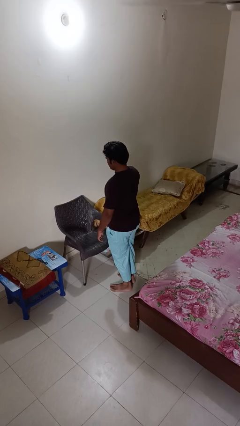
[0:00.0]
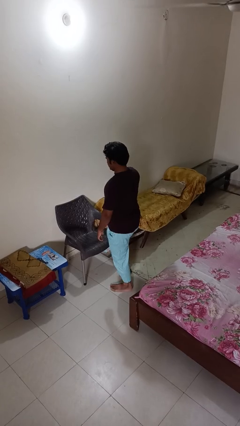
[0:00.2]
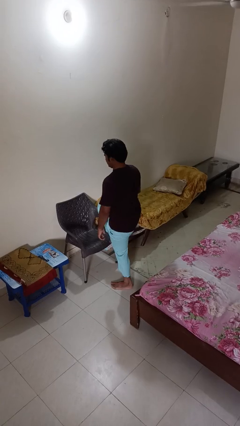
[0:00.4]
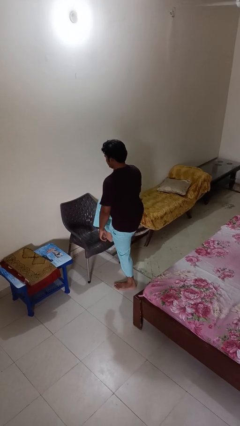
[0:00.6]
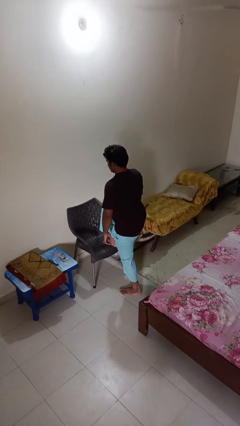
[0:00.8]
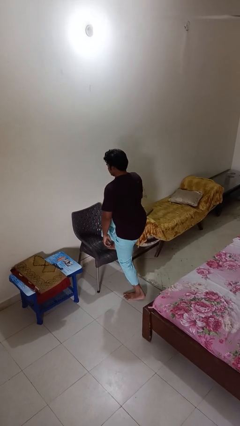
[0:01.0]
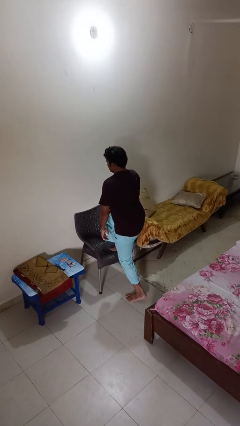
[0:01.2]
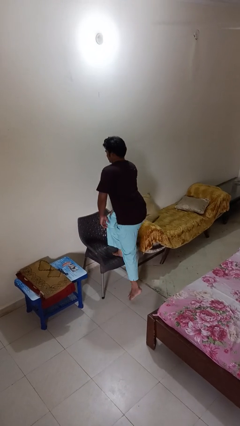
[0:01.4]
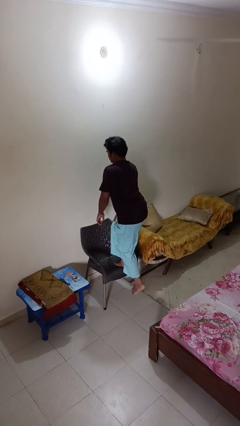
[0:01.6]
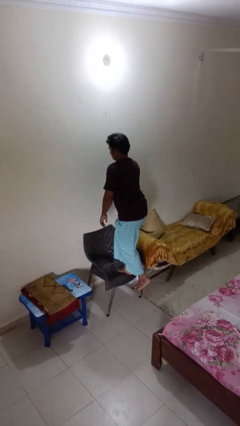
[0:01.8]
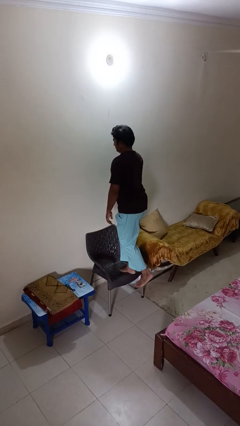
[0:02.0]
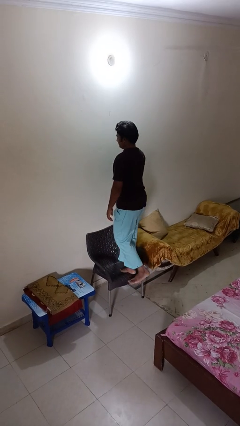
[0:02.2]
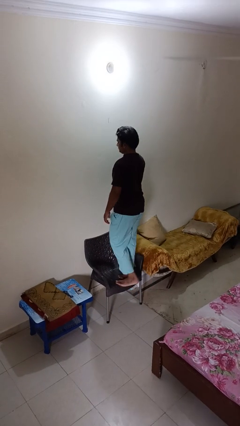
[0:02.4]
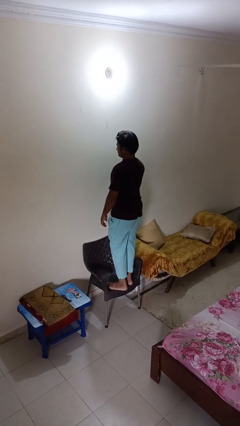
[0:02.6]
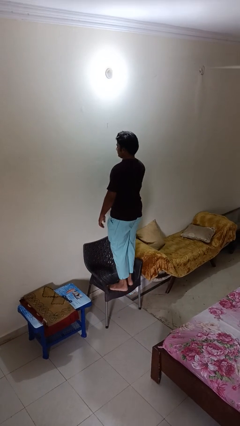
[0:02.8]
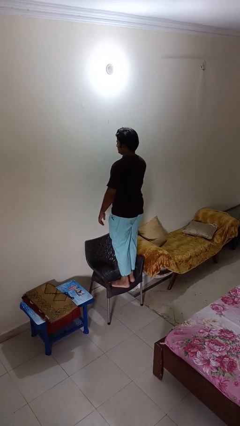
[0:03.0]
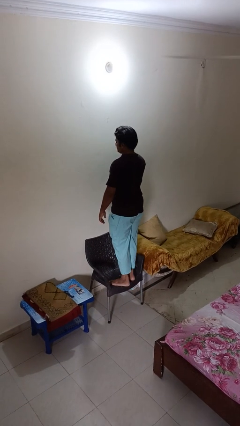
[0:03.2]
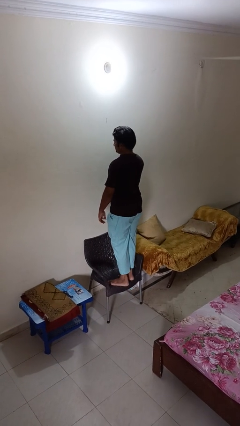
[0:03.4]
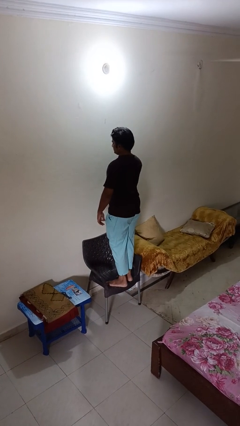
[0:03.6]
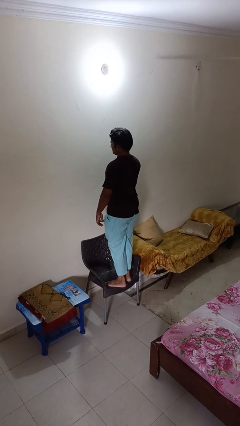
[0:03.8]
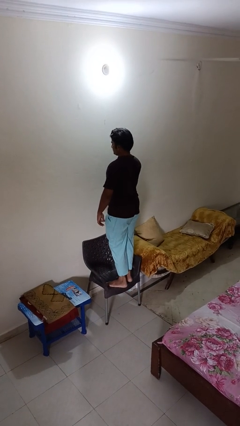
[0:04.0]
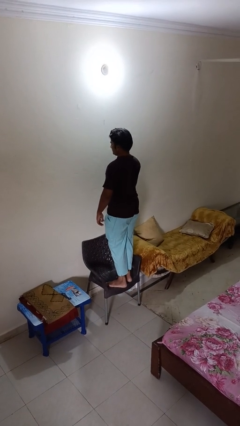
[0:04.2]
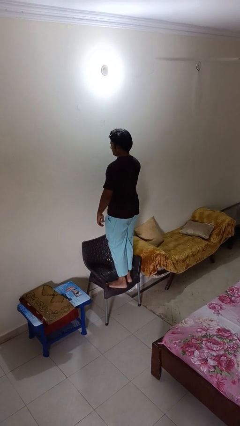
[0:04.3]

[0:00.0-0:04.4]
person climbs on chair

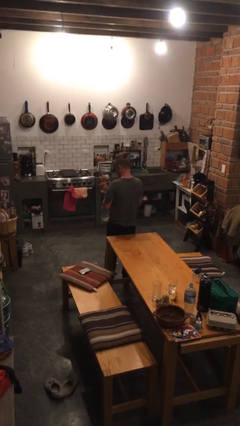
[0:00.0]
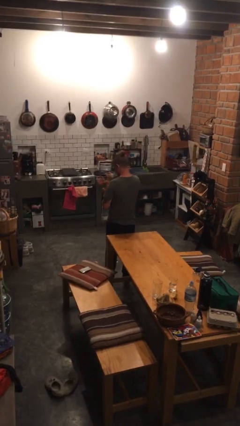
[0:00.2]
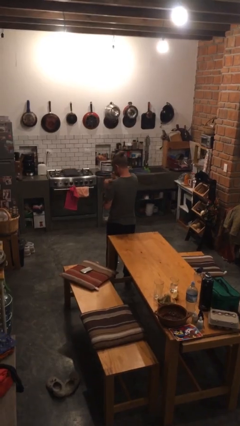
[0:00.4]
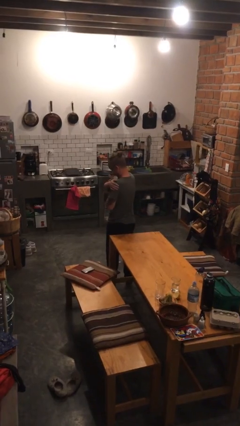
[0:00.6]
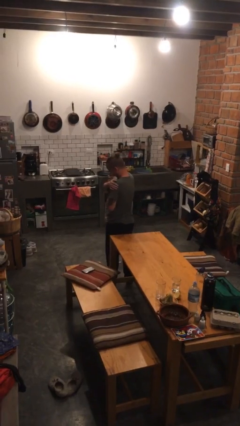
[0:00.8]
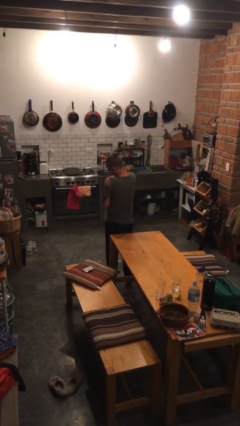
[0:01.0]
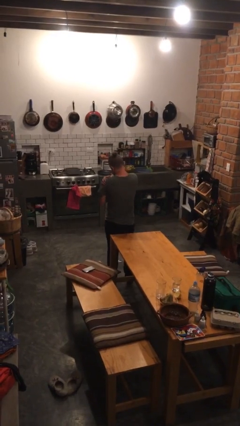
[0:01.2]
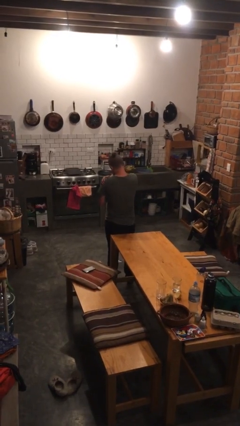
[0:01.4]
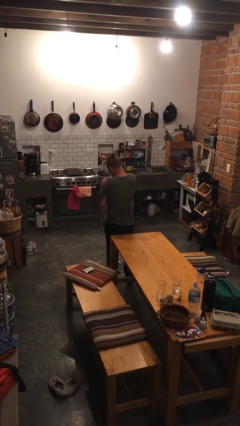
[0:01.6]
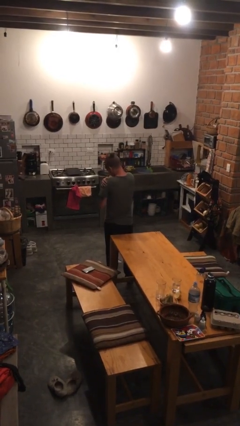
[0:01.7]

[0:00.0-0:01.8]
person hugs stuffed animal

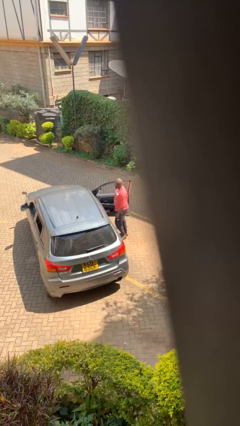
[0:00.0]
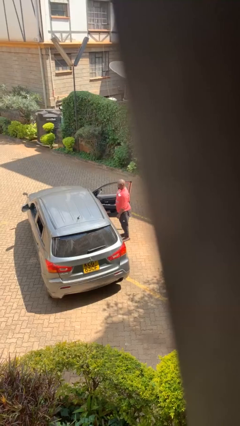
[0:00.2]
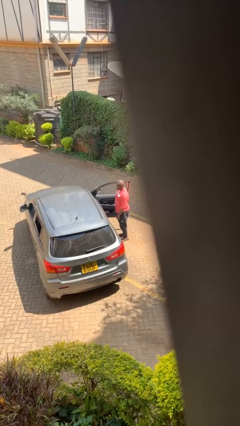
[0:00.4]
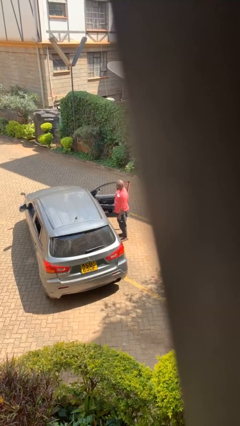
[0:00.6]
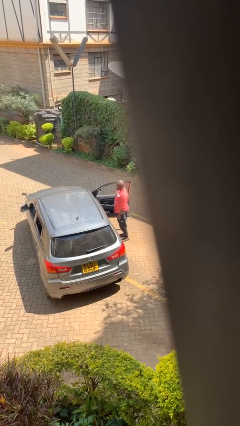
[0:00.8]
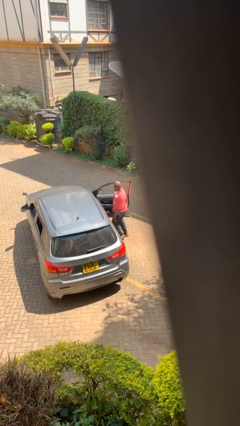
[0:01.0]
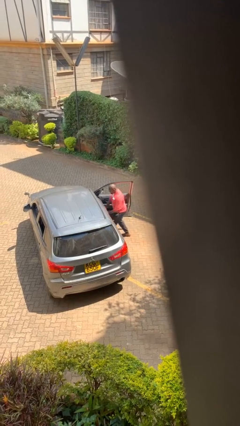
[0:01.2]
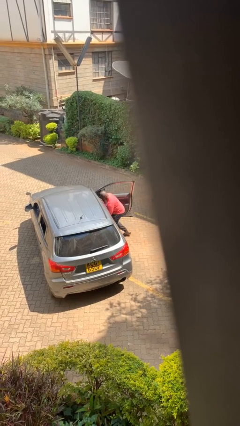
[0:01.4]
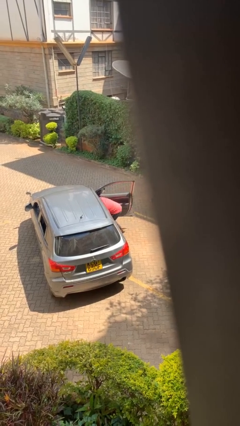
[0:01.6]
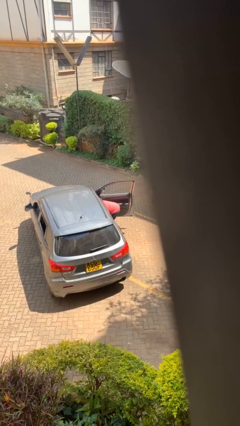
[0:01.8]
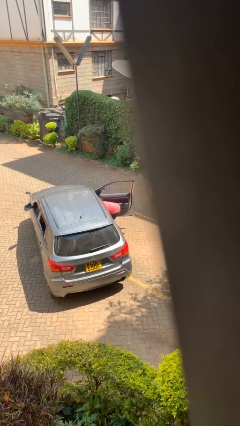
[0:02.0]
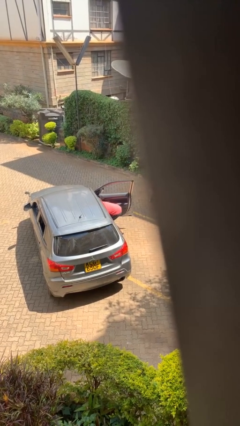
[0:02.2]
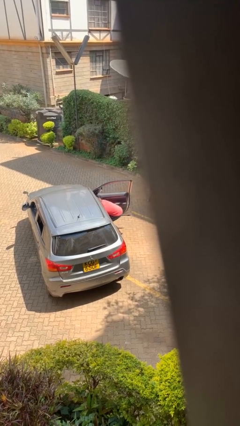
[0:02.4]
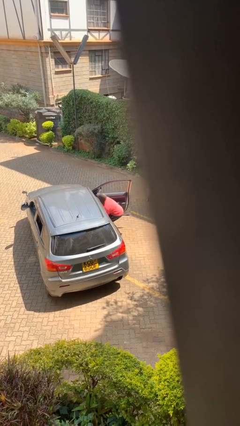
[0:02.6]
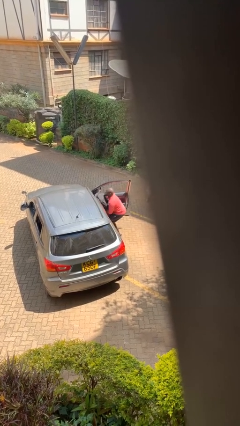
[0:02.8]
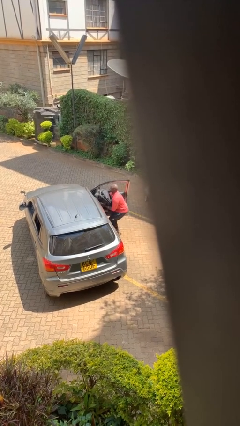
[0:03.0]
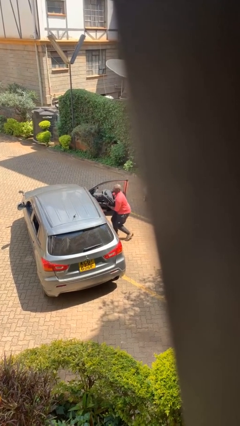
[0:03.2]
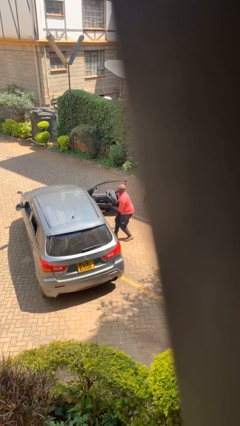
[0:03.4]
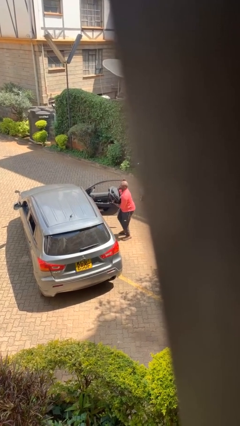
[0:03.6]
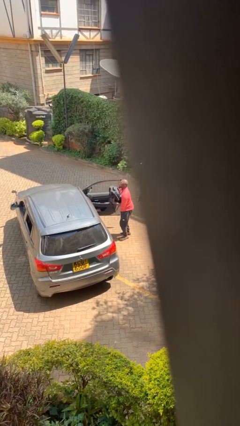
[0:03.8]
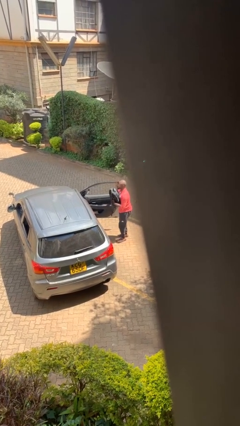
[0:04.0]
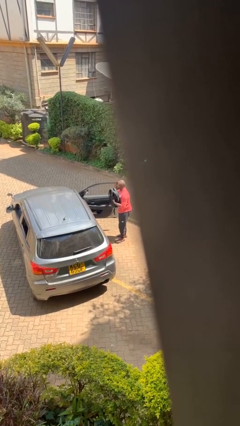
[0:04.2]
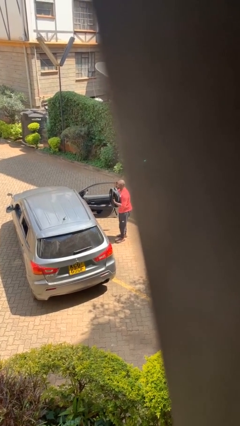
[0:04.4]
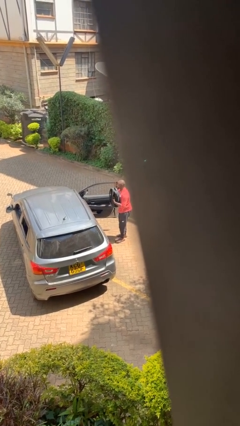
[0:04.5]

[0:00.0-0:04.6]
person unloads car

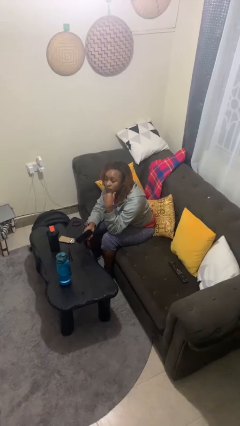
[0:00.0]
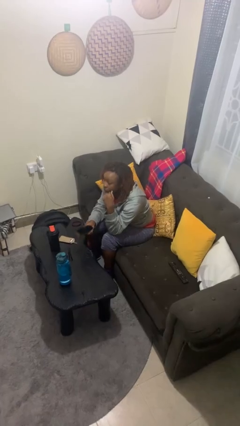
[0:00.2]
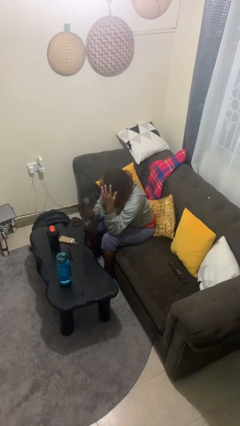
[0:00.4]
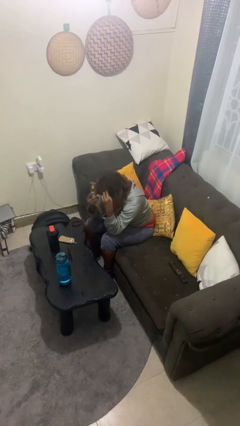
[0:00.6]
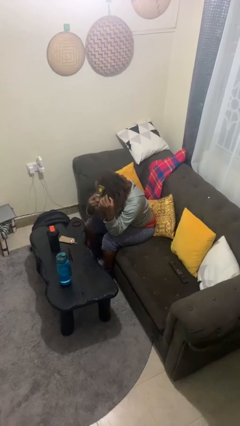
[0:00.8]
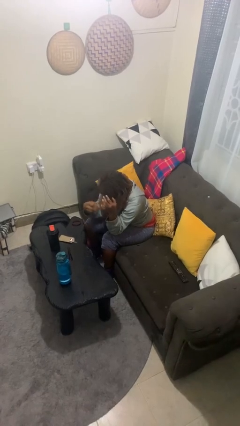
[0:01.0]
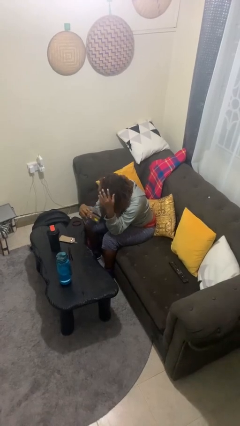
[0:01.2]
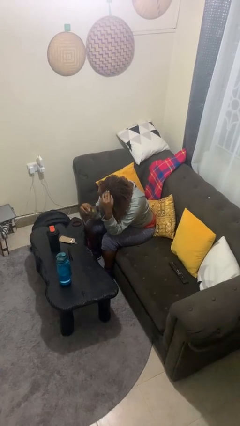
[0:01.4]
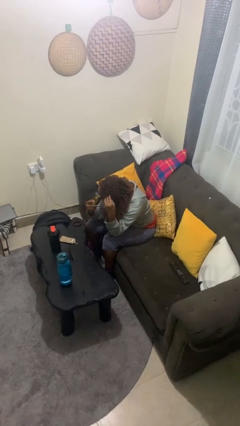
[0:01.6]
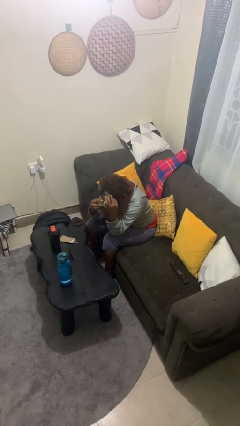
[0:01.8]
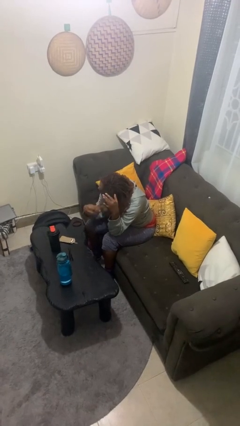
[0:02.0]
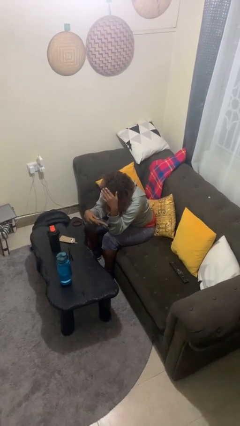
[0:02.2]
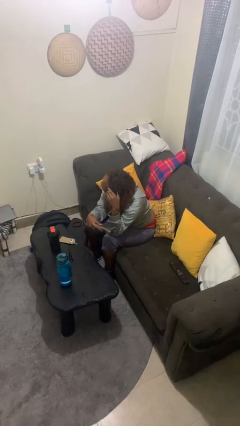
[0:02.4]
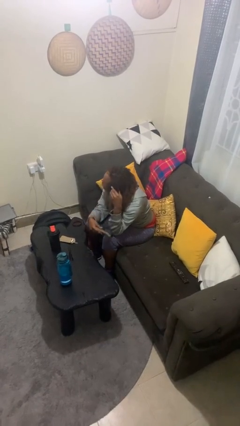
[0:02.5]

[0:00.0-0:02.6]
person brushes hair

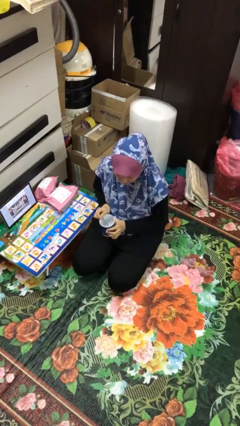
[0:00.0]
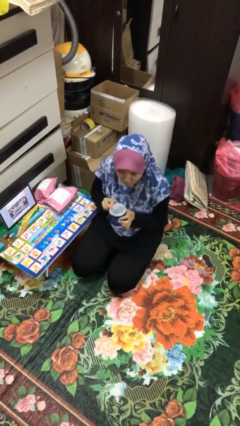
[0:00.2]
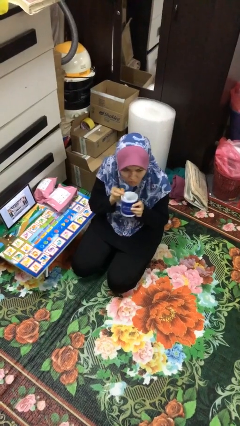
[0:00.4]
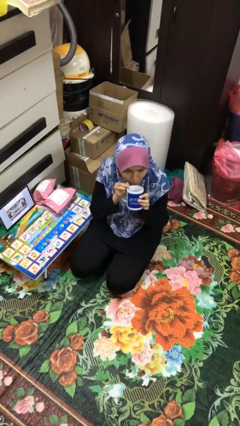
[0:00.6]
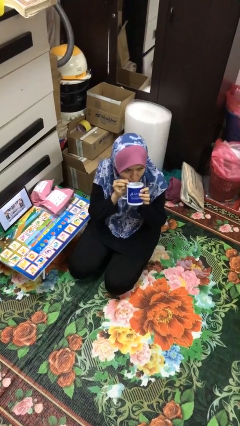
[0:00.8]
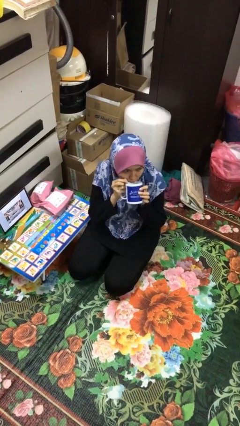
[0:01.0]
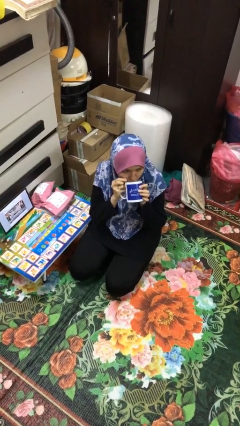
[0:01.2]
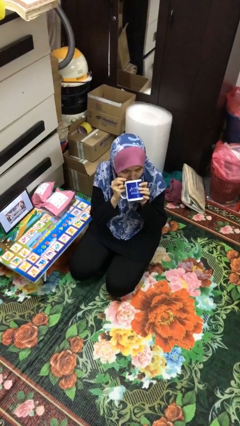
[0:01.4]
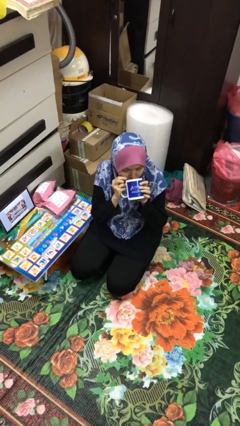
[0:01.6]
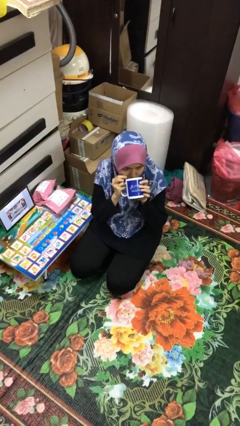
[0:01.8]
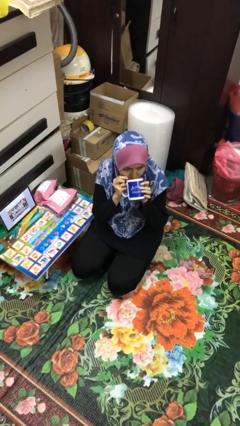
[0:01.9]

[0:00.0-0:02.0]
person drinks from mug

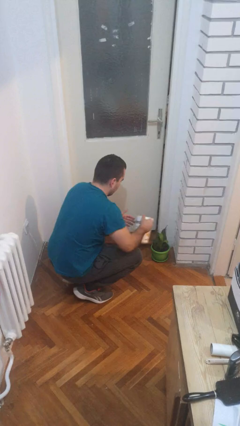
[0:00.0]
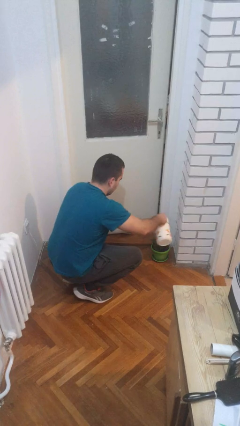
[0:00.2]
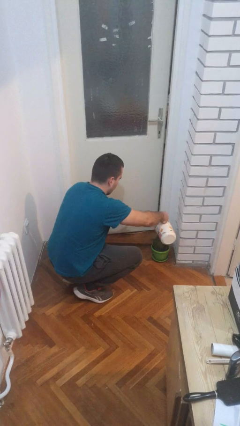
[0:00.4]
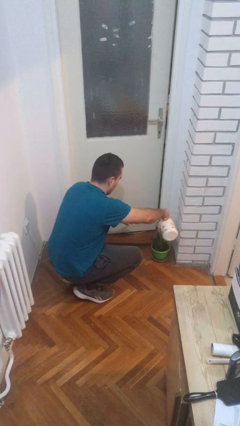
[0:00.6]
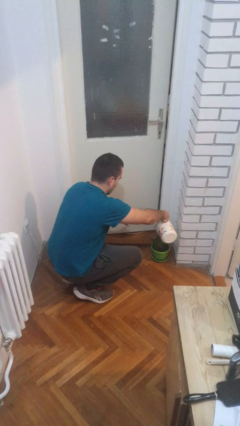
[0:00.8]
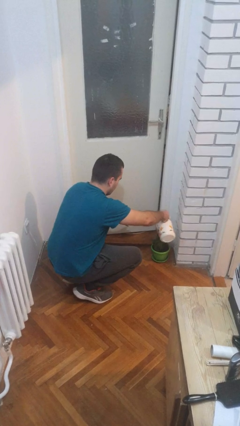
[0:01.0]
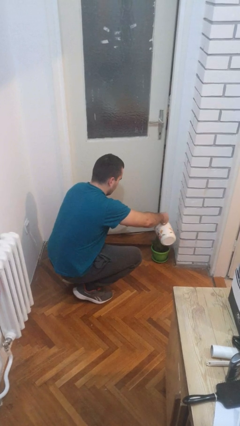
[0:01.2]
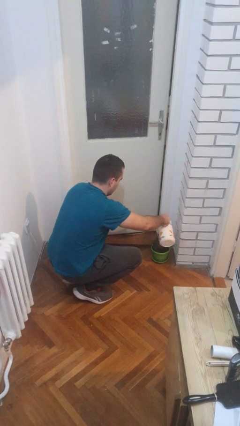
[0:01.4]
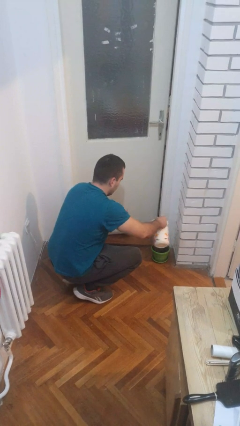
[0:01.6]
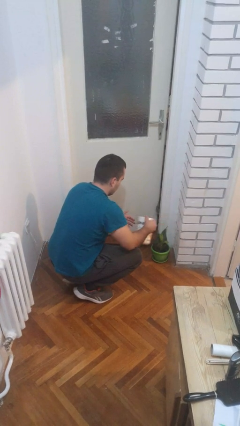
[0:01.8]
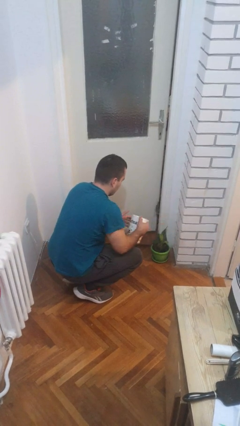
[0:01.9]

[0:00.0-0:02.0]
person waters houseplant
